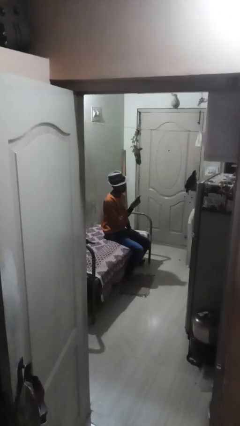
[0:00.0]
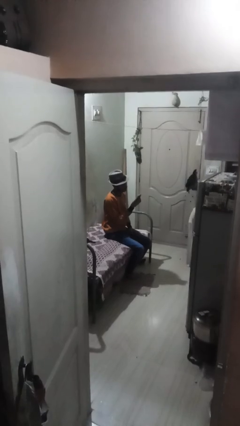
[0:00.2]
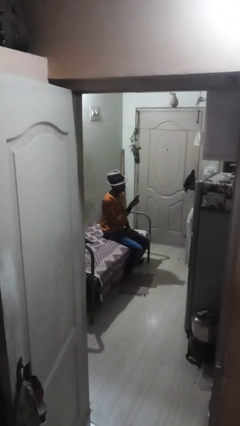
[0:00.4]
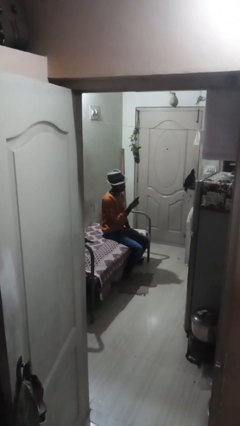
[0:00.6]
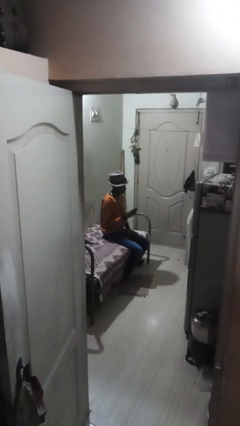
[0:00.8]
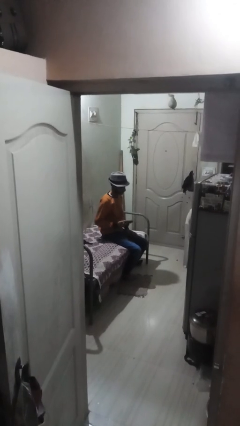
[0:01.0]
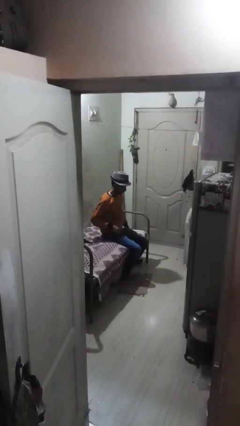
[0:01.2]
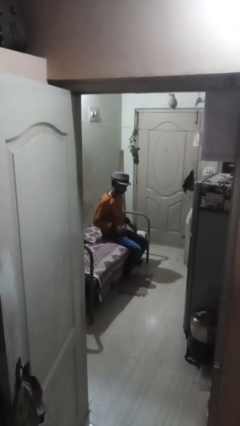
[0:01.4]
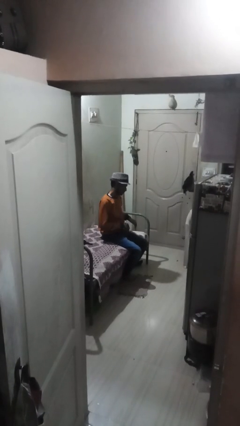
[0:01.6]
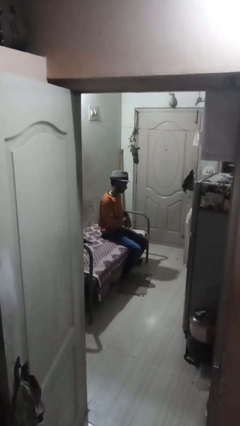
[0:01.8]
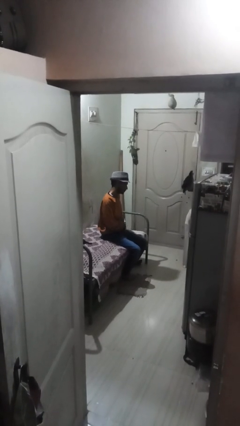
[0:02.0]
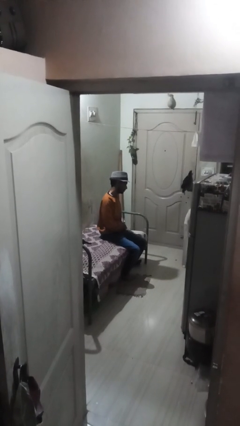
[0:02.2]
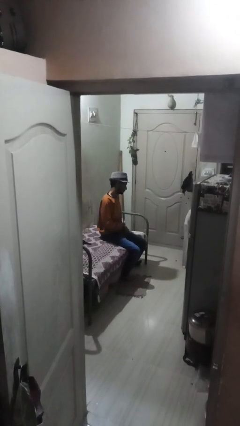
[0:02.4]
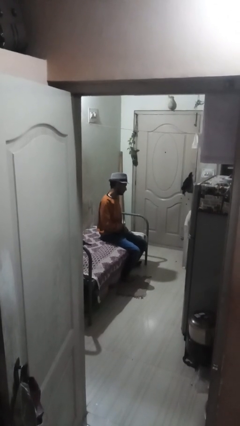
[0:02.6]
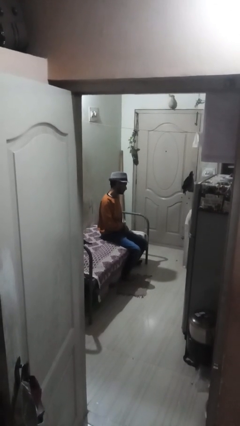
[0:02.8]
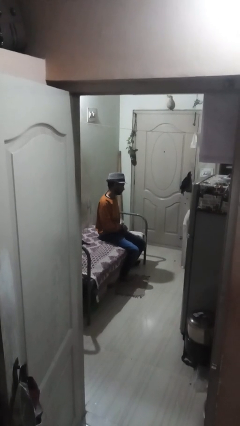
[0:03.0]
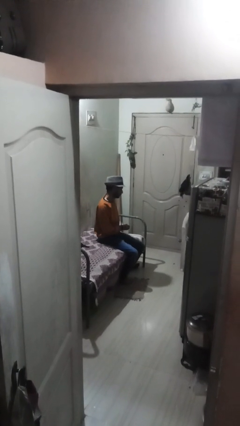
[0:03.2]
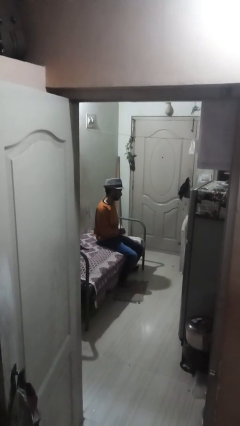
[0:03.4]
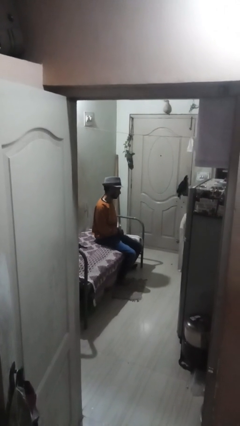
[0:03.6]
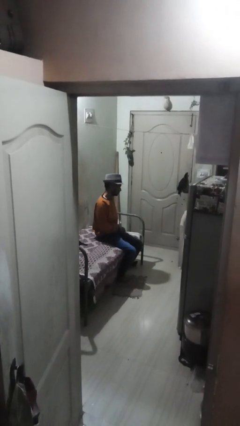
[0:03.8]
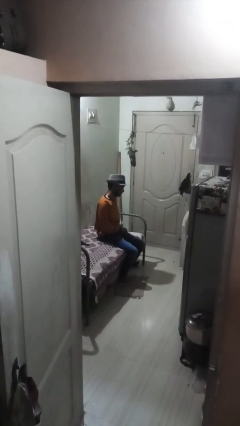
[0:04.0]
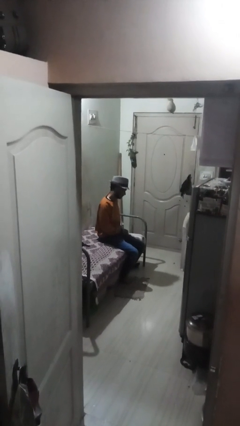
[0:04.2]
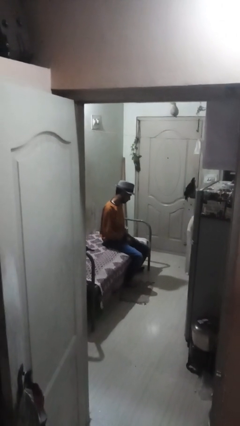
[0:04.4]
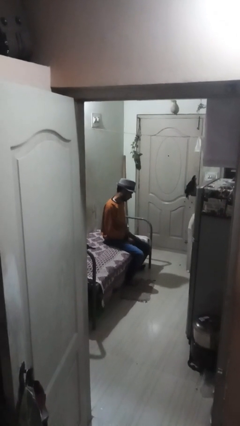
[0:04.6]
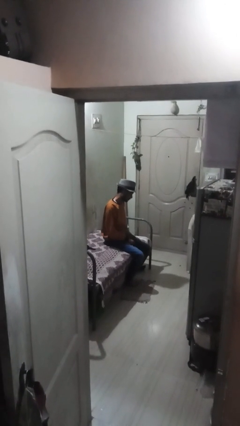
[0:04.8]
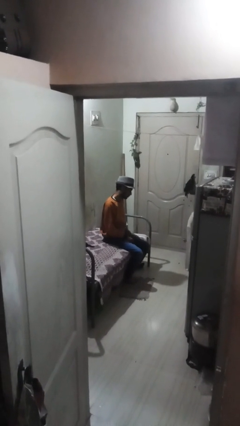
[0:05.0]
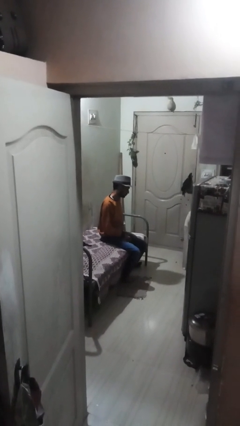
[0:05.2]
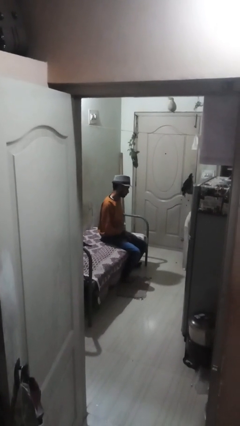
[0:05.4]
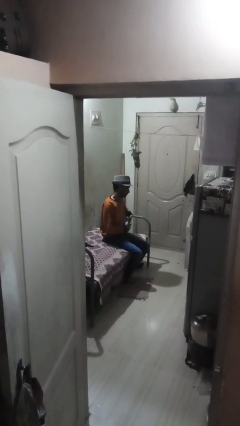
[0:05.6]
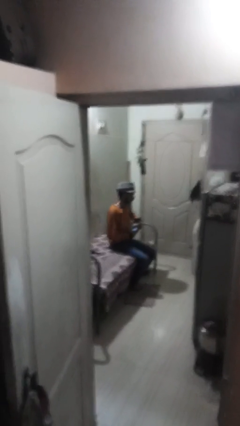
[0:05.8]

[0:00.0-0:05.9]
person puts phone into pocket

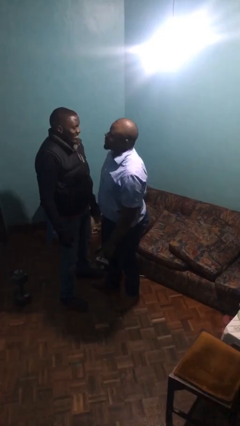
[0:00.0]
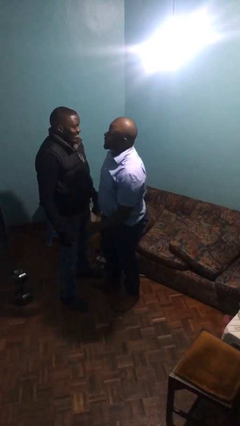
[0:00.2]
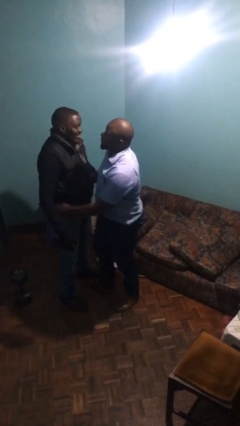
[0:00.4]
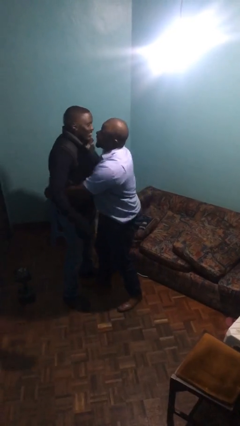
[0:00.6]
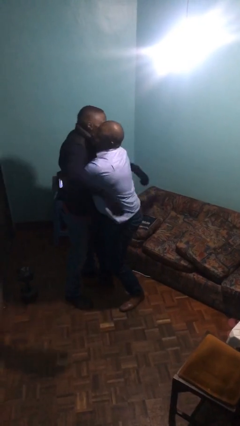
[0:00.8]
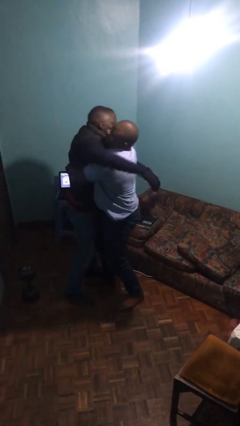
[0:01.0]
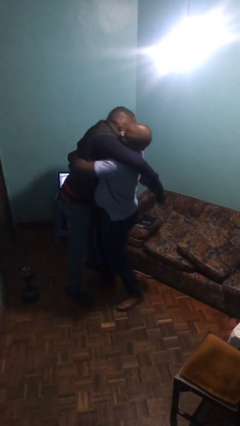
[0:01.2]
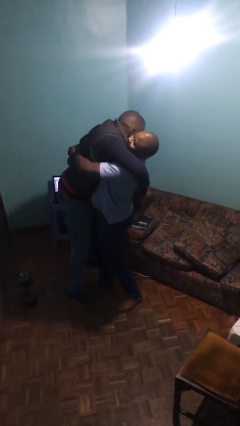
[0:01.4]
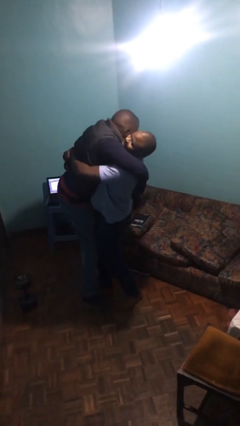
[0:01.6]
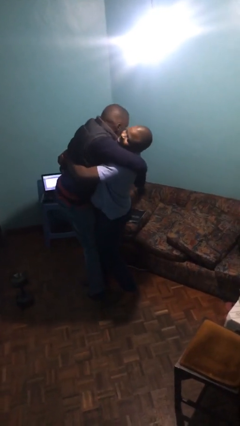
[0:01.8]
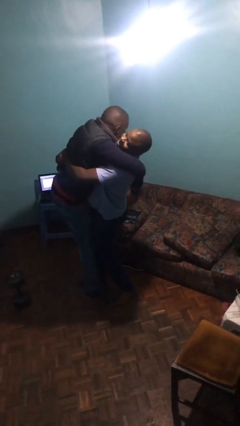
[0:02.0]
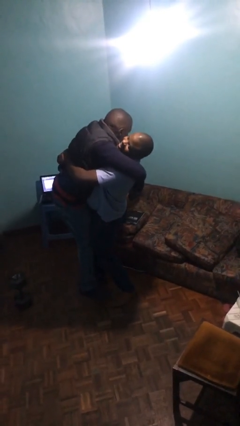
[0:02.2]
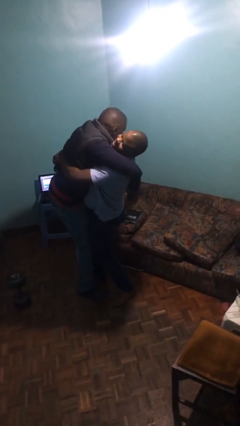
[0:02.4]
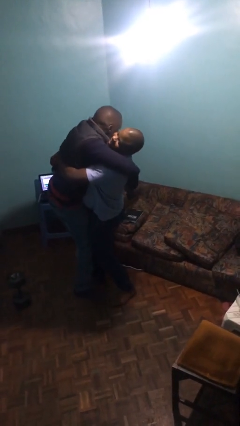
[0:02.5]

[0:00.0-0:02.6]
person picks up person

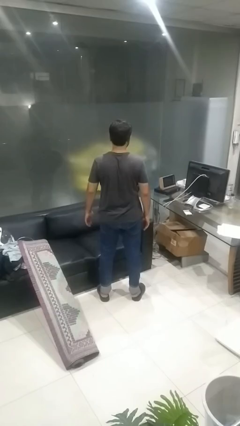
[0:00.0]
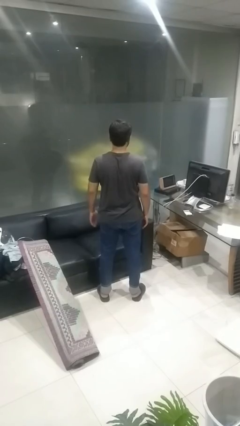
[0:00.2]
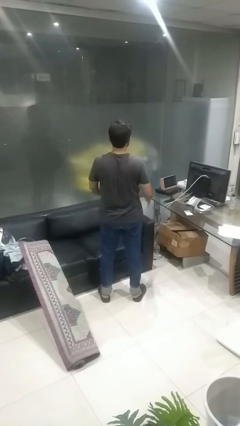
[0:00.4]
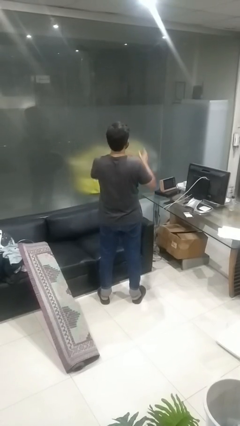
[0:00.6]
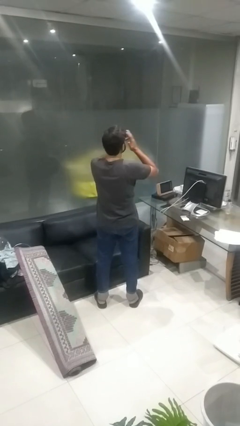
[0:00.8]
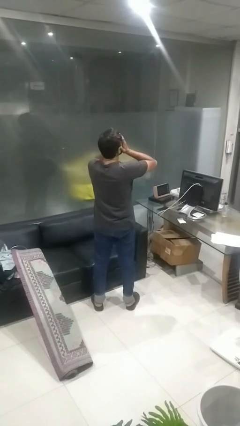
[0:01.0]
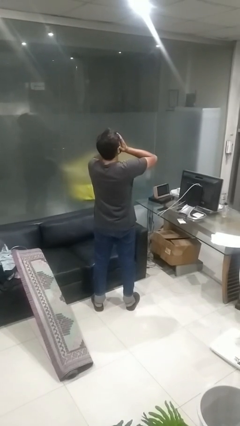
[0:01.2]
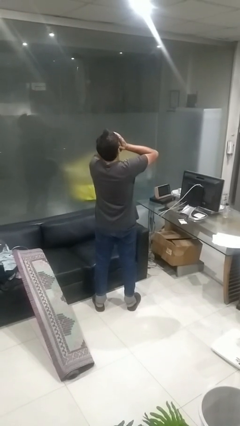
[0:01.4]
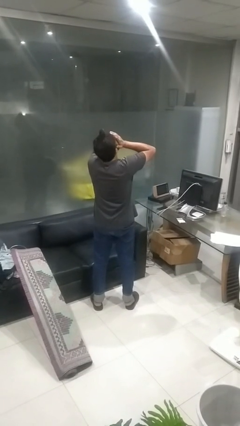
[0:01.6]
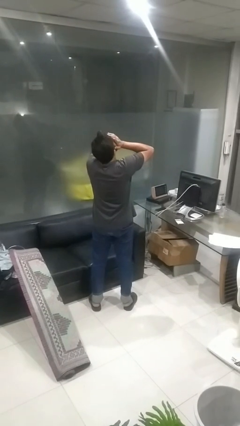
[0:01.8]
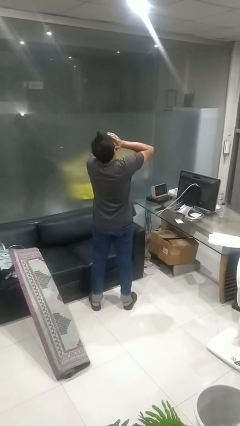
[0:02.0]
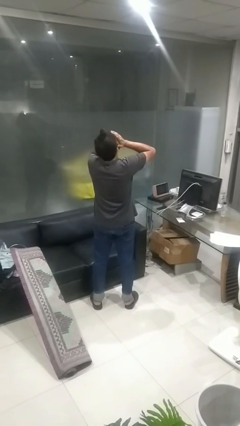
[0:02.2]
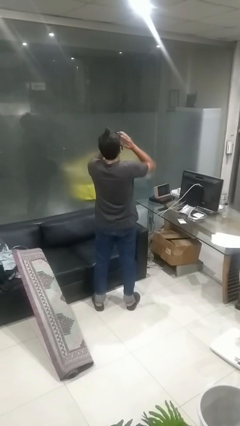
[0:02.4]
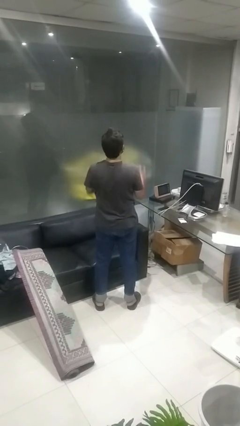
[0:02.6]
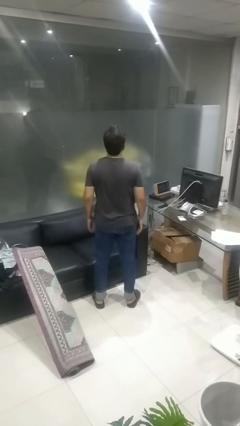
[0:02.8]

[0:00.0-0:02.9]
person covers face with hands

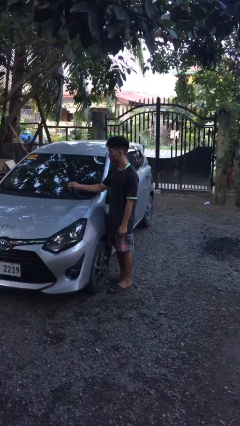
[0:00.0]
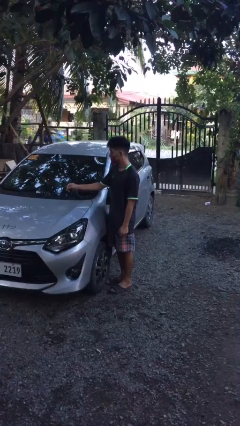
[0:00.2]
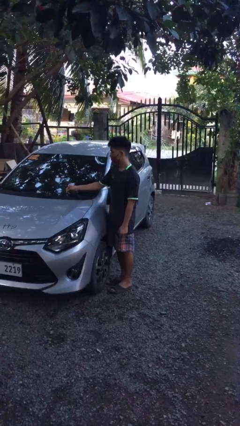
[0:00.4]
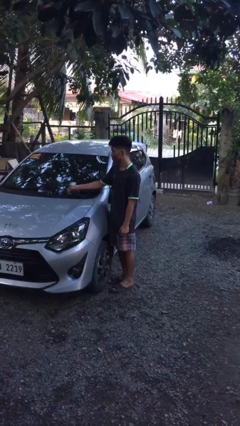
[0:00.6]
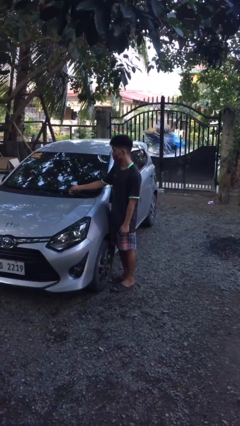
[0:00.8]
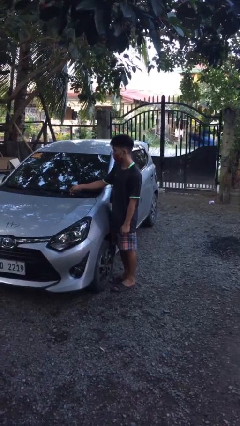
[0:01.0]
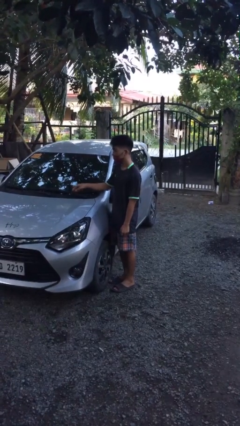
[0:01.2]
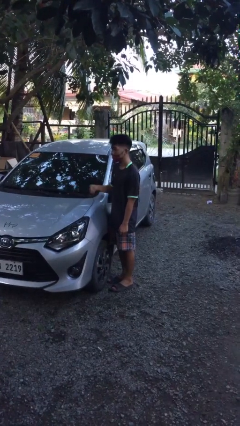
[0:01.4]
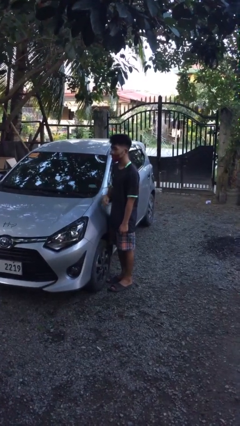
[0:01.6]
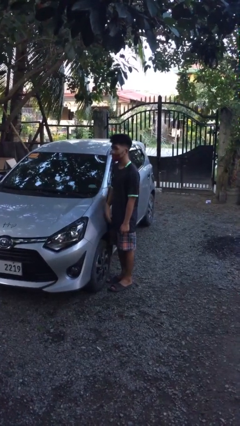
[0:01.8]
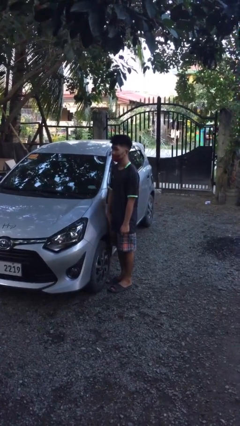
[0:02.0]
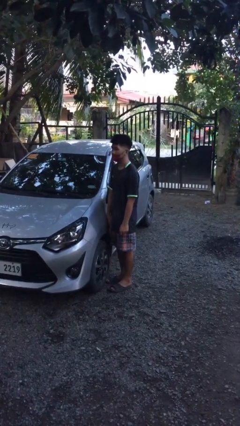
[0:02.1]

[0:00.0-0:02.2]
person flips down car wipers

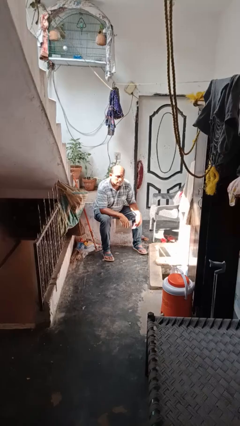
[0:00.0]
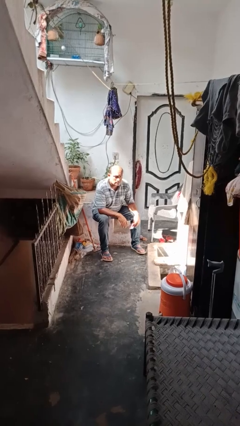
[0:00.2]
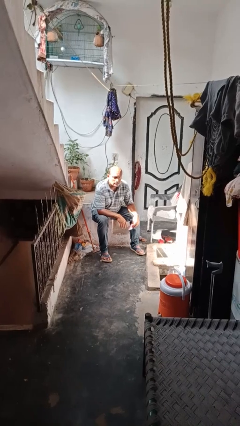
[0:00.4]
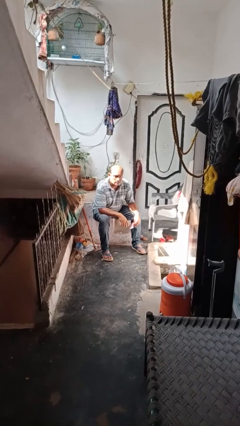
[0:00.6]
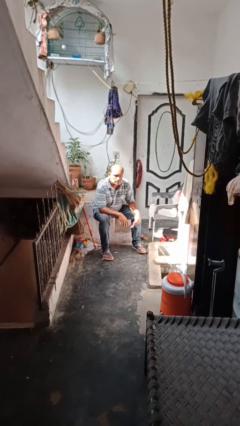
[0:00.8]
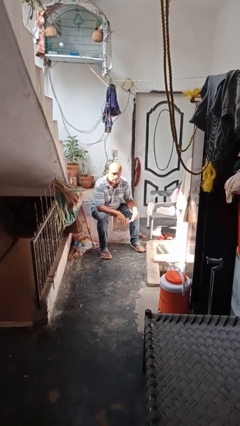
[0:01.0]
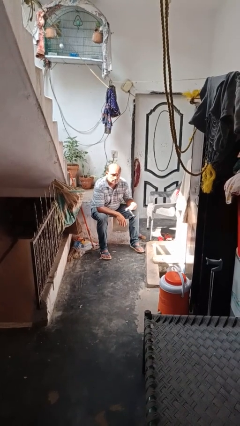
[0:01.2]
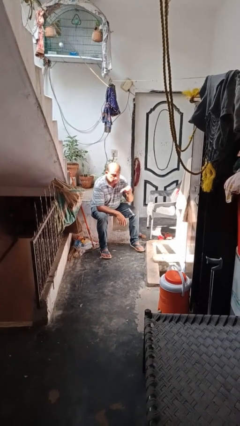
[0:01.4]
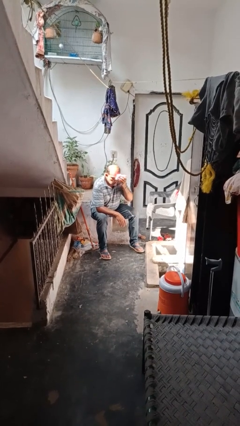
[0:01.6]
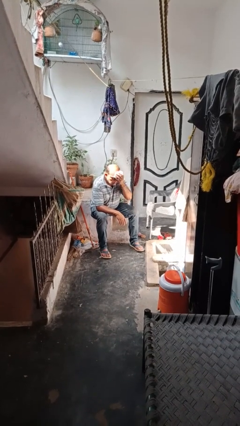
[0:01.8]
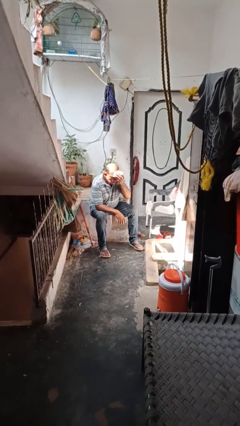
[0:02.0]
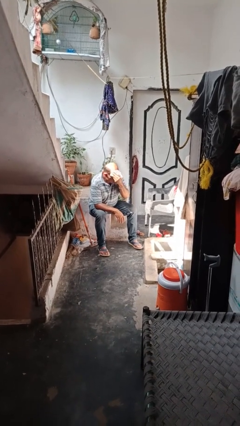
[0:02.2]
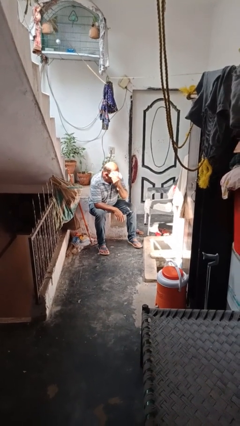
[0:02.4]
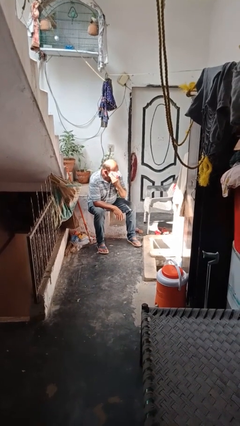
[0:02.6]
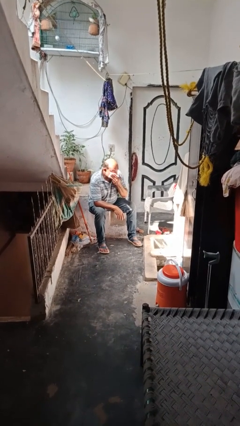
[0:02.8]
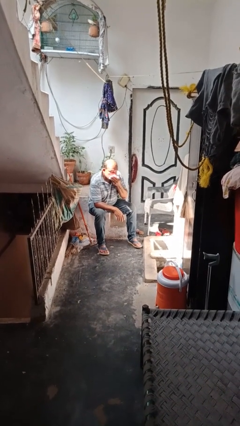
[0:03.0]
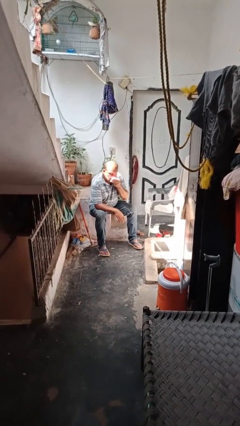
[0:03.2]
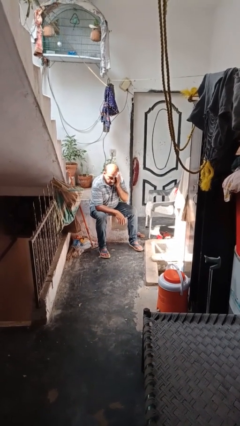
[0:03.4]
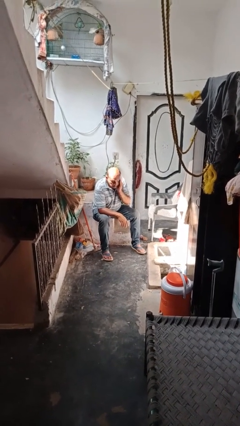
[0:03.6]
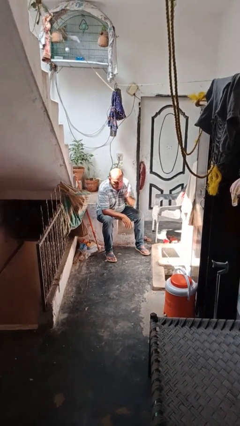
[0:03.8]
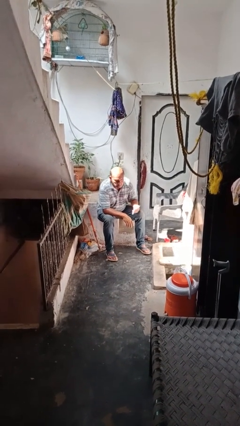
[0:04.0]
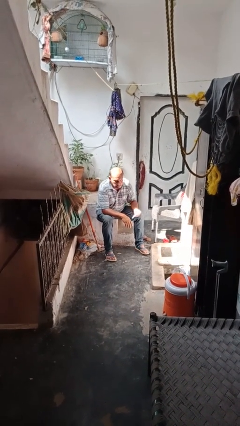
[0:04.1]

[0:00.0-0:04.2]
person wipes mouth with napkin
